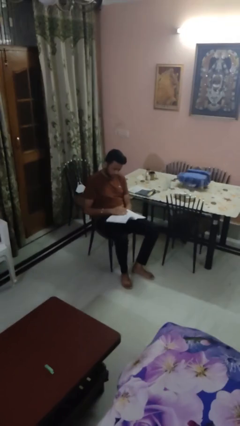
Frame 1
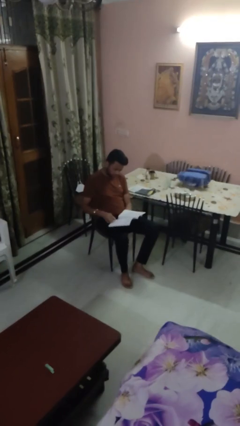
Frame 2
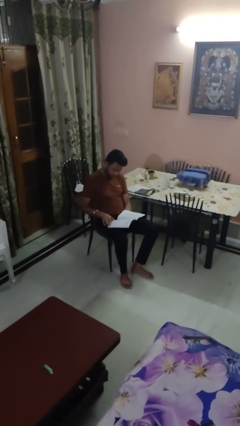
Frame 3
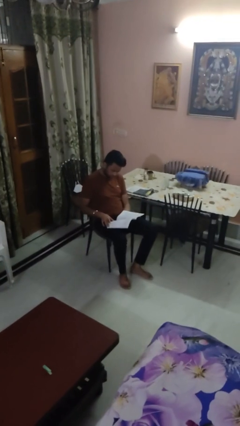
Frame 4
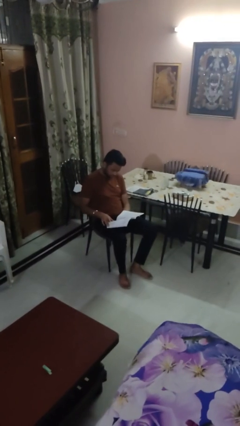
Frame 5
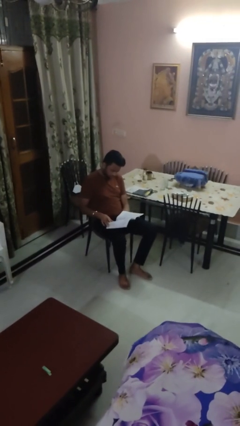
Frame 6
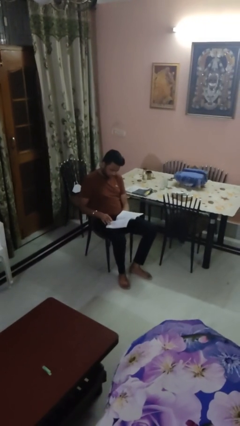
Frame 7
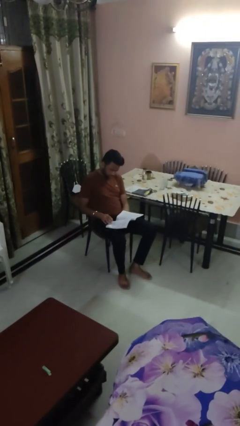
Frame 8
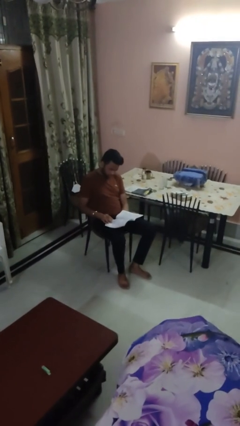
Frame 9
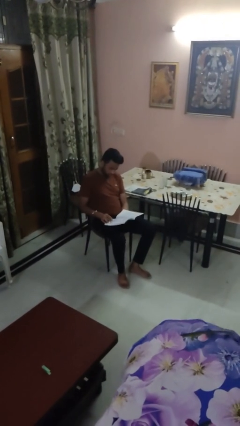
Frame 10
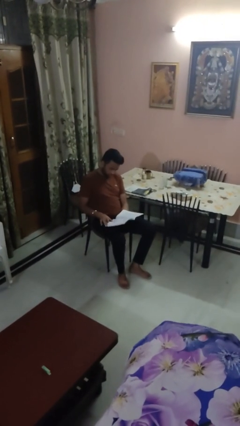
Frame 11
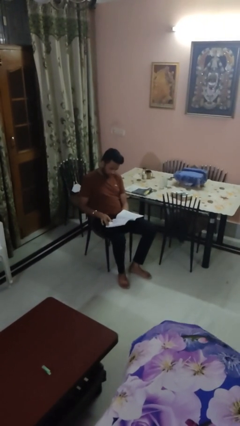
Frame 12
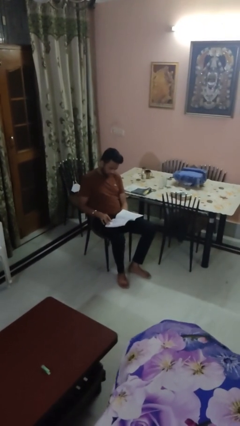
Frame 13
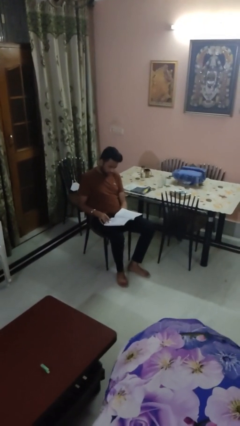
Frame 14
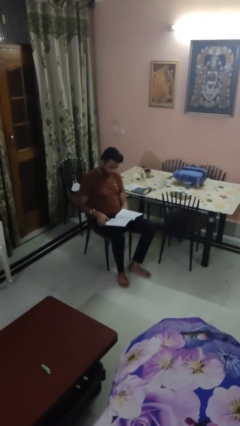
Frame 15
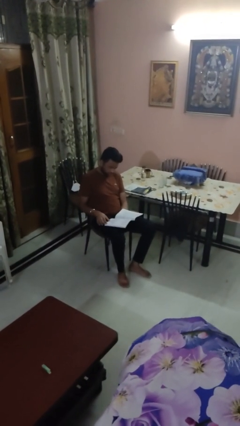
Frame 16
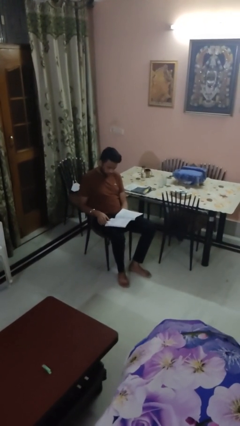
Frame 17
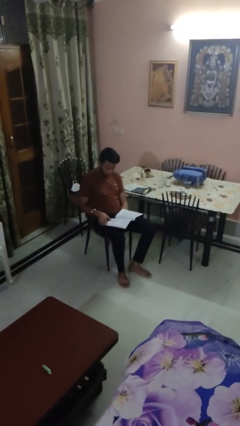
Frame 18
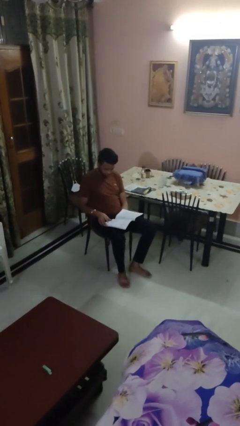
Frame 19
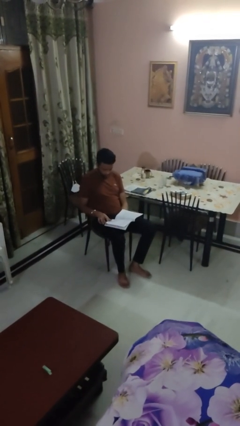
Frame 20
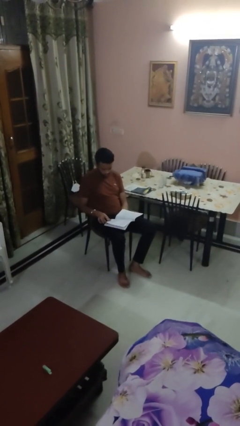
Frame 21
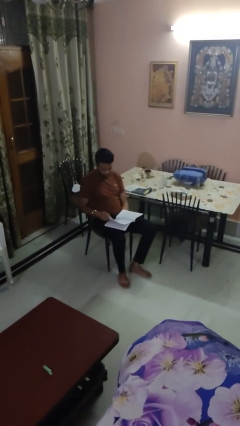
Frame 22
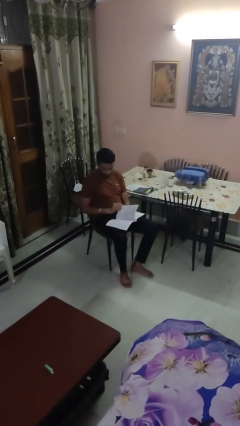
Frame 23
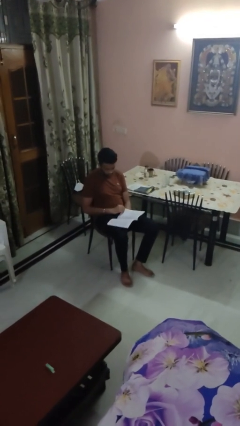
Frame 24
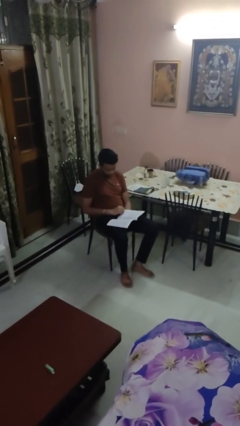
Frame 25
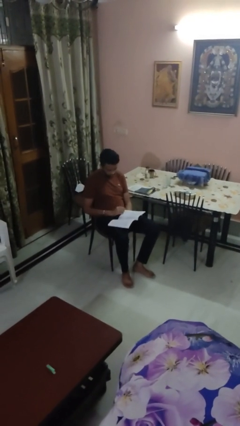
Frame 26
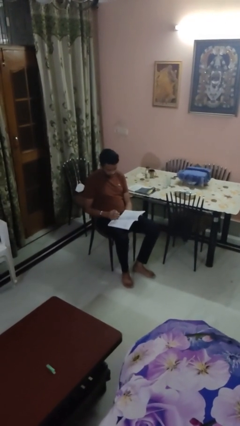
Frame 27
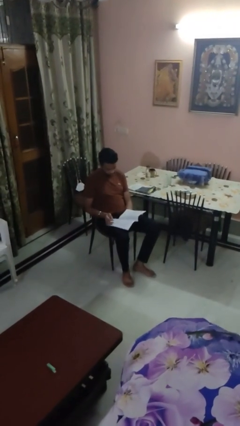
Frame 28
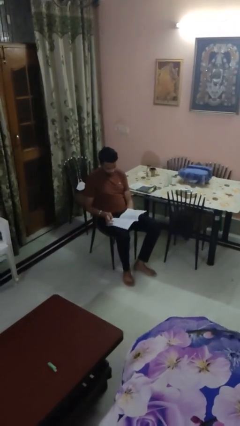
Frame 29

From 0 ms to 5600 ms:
person reads magazine

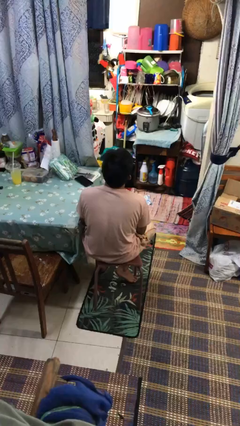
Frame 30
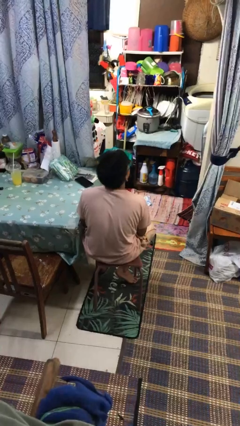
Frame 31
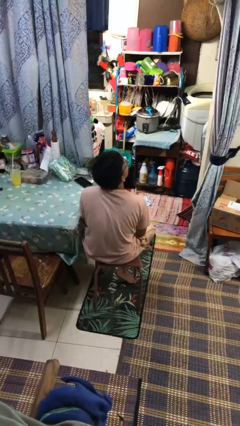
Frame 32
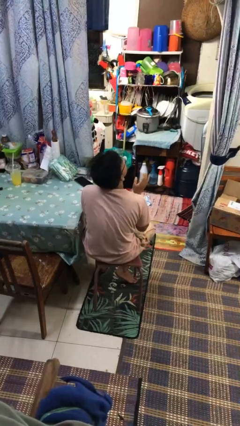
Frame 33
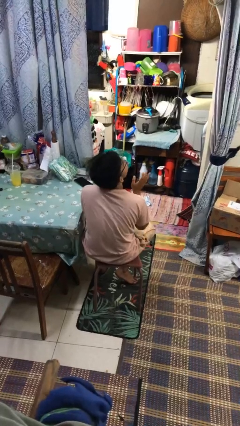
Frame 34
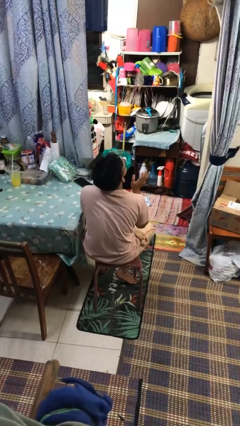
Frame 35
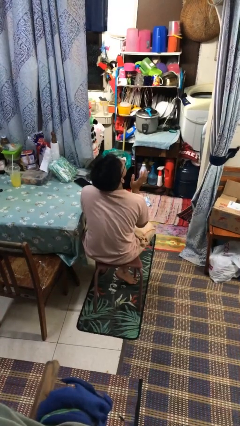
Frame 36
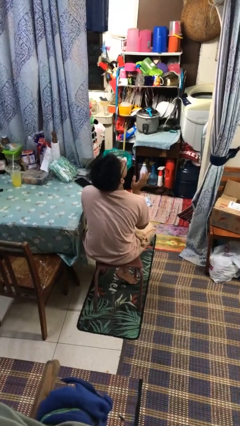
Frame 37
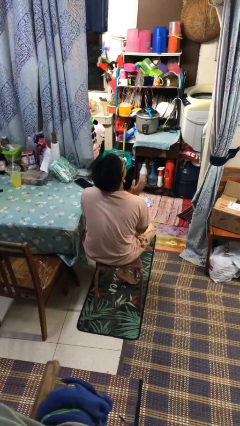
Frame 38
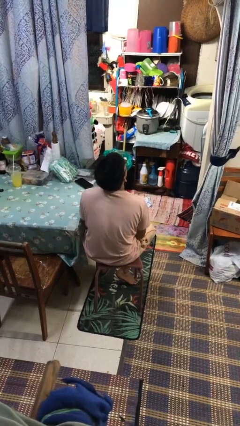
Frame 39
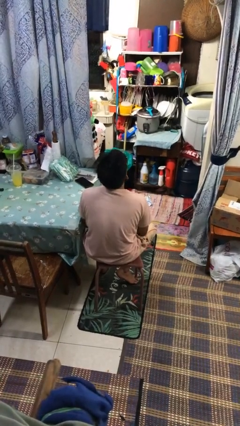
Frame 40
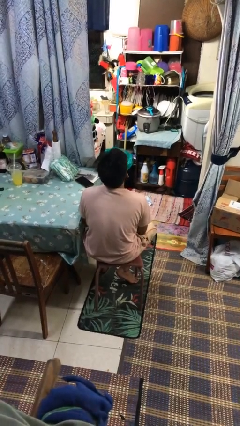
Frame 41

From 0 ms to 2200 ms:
person sticks out tongue

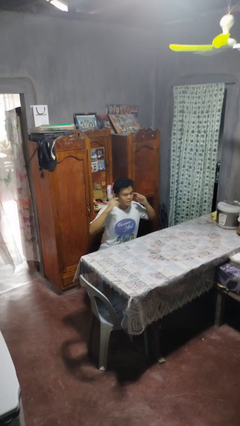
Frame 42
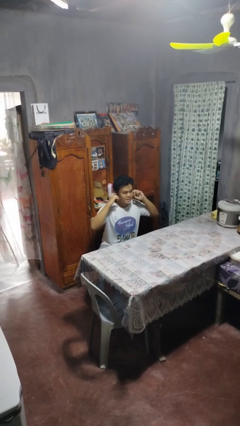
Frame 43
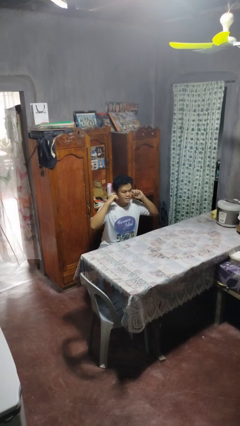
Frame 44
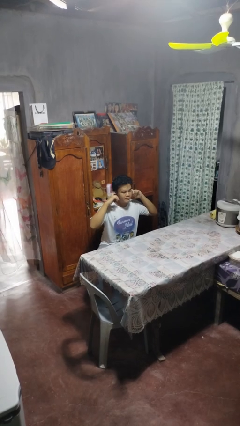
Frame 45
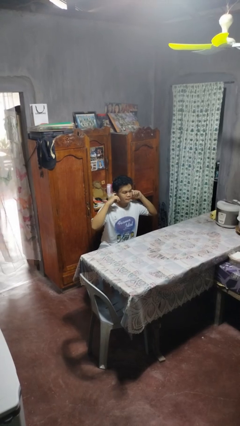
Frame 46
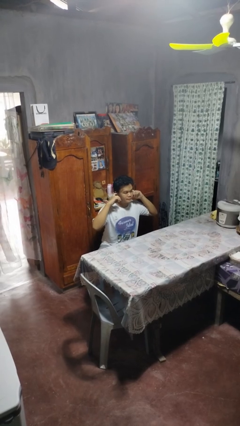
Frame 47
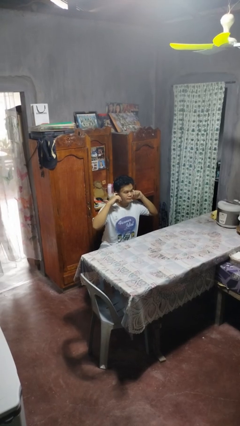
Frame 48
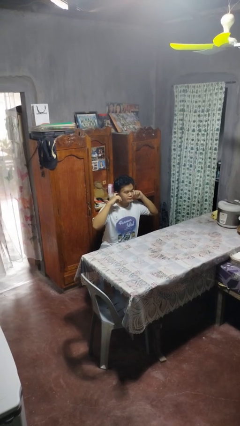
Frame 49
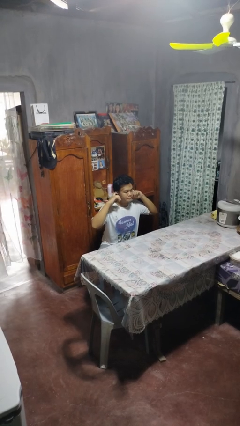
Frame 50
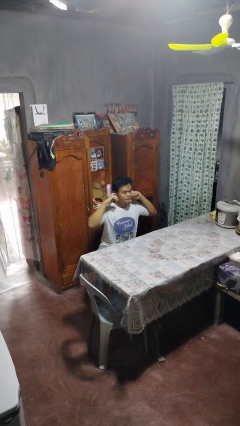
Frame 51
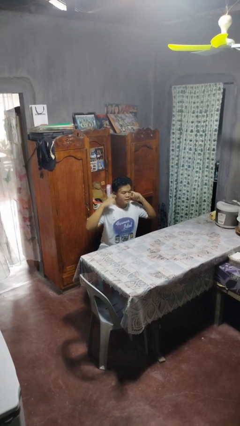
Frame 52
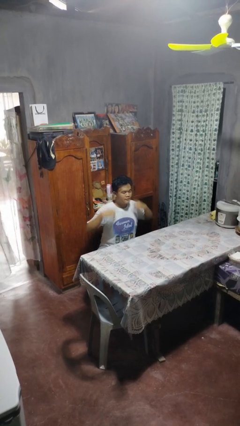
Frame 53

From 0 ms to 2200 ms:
person puts fingers in ear

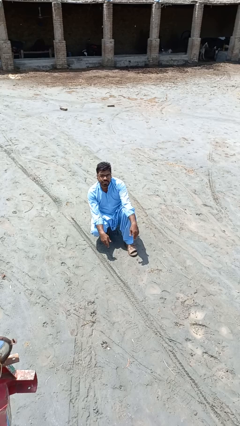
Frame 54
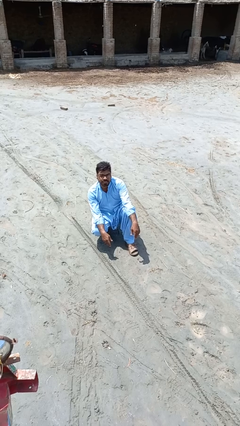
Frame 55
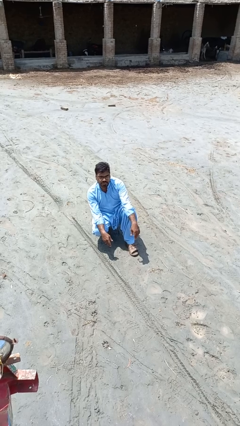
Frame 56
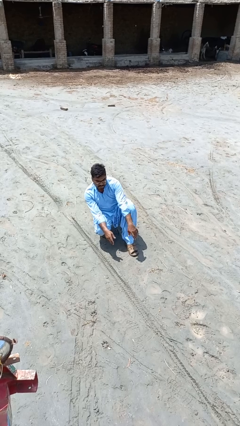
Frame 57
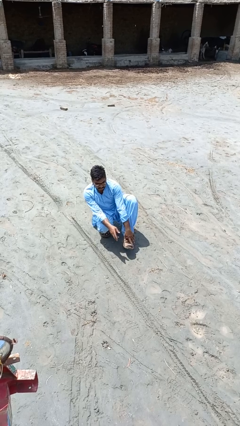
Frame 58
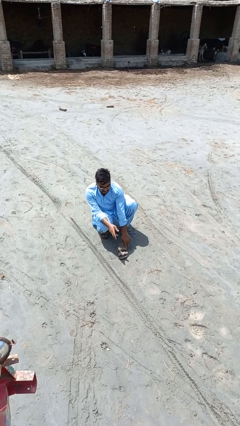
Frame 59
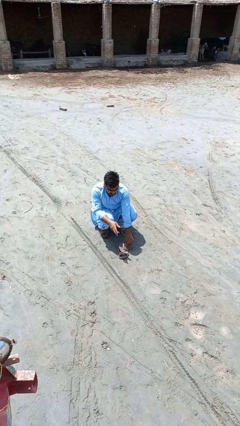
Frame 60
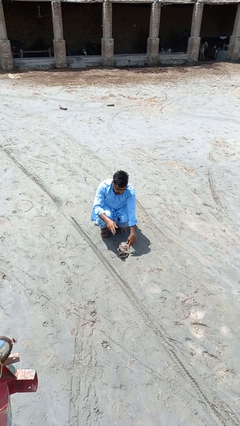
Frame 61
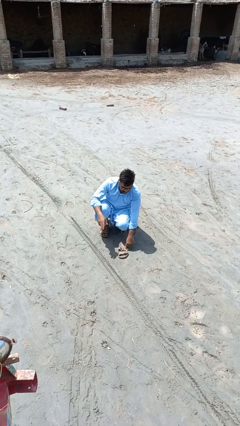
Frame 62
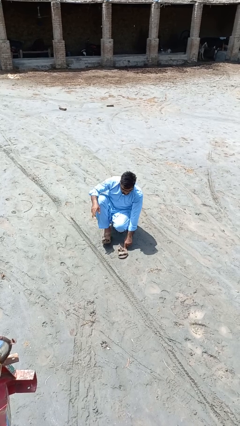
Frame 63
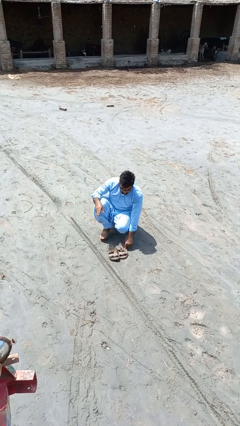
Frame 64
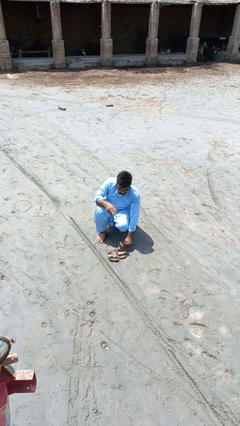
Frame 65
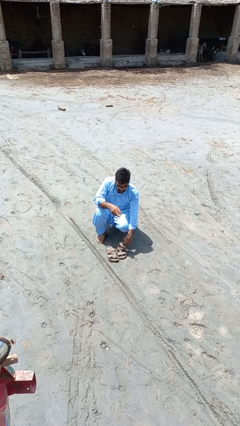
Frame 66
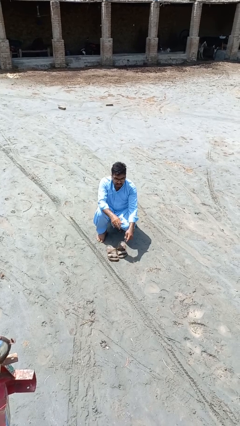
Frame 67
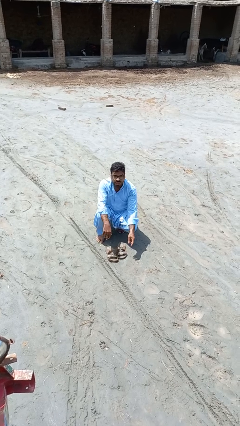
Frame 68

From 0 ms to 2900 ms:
person takes off shoes

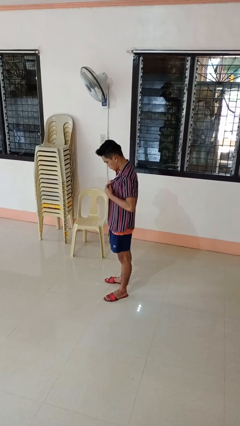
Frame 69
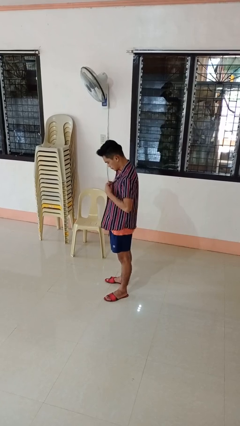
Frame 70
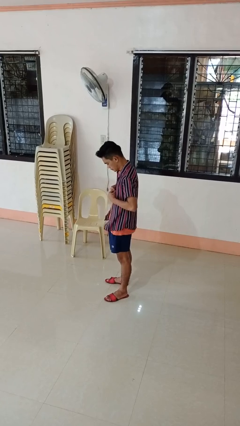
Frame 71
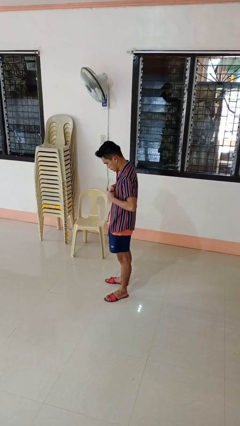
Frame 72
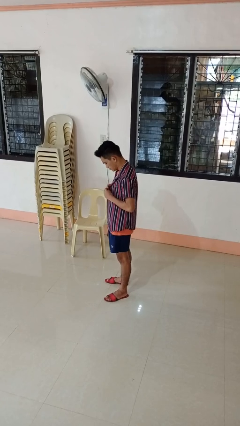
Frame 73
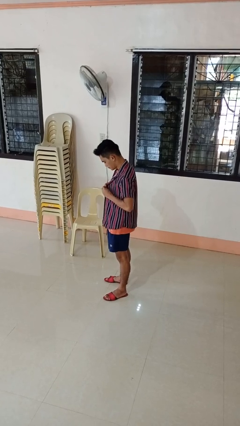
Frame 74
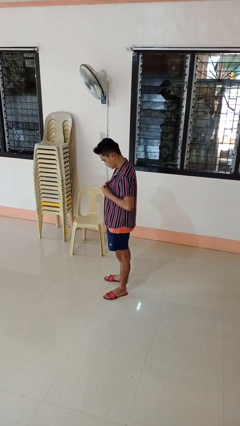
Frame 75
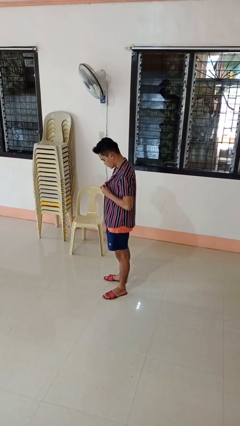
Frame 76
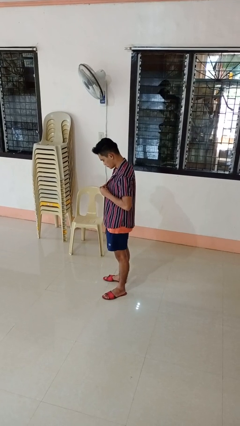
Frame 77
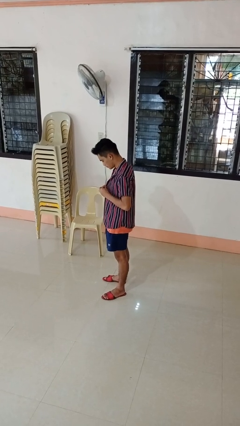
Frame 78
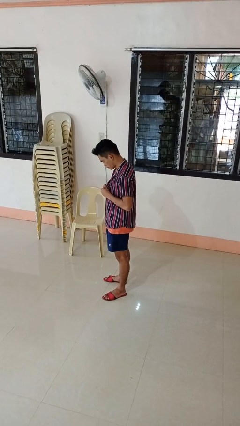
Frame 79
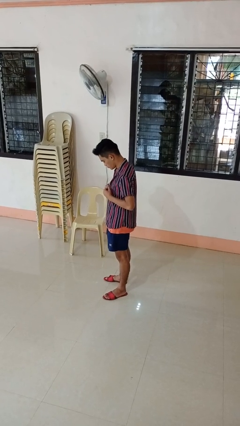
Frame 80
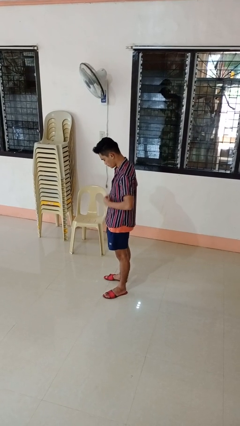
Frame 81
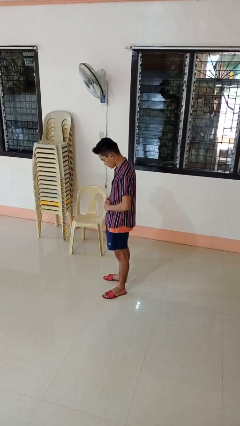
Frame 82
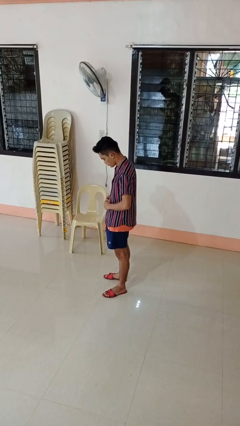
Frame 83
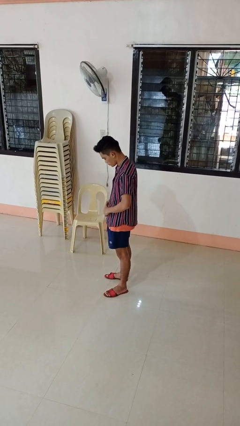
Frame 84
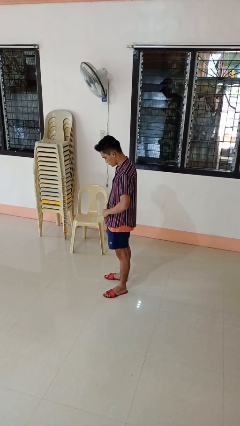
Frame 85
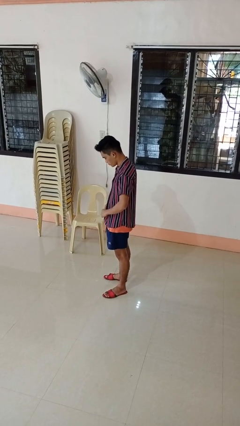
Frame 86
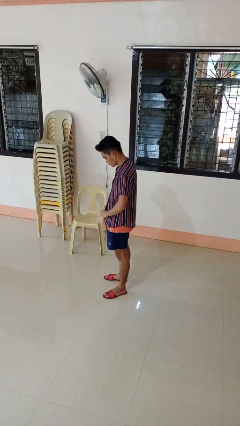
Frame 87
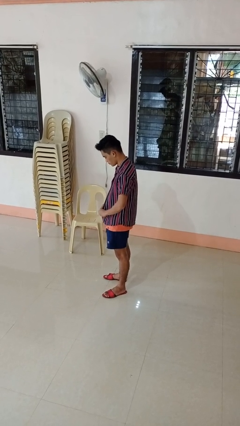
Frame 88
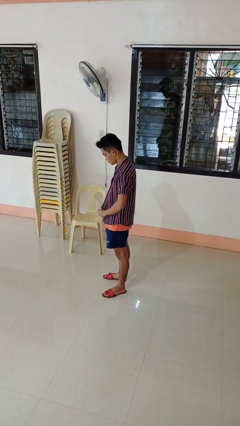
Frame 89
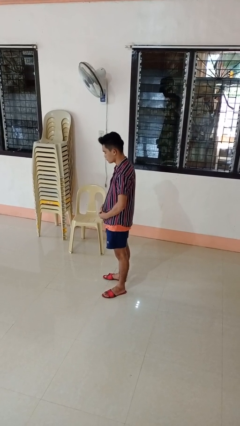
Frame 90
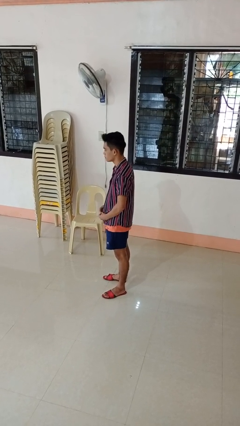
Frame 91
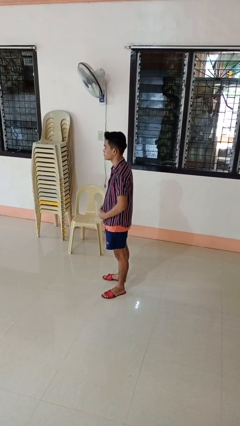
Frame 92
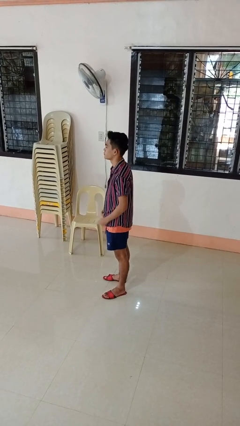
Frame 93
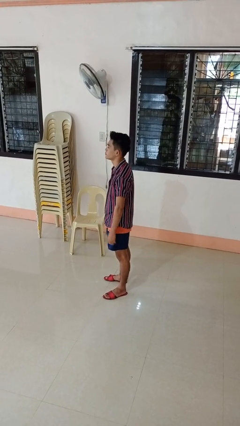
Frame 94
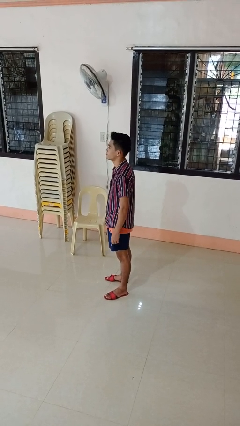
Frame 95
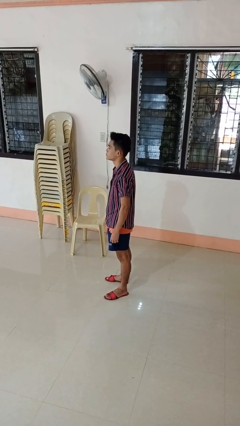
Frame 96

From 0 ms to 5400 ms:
person buttons shirt
